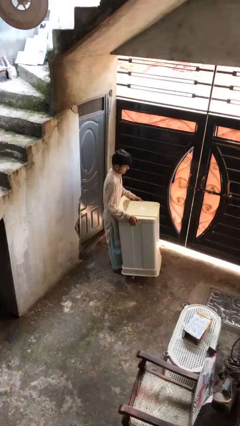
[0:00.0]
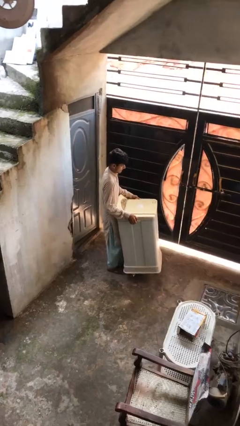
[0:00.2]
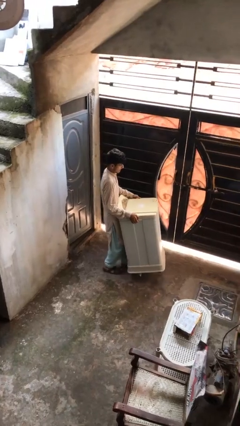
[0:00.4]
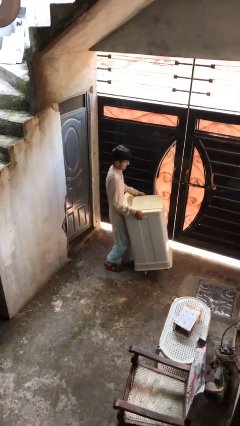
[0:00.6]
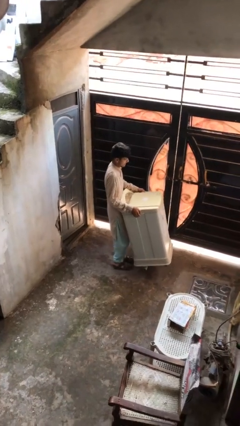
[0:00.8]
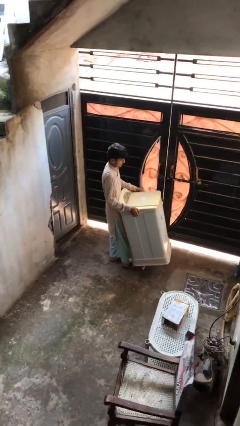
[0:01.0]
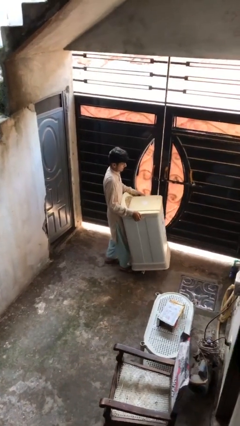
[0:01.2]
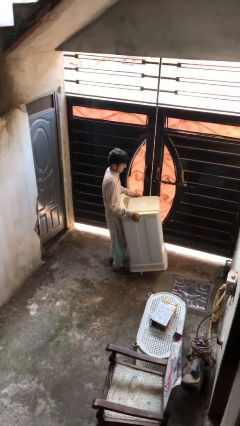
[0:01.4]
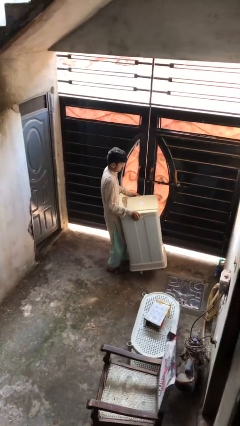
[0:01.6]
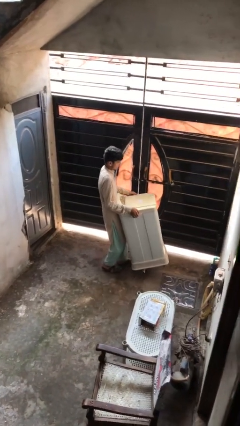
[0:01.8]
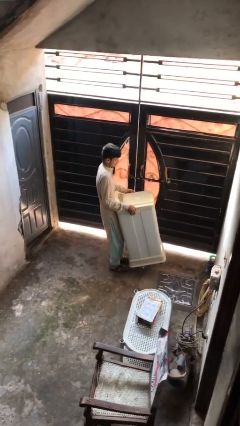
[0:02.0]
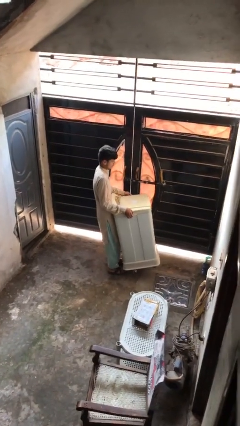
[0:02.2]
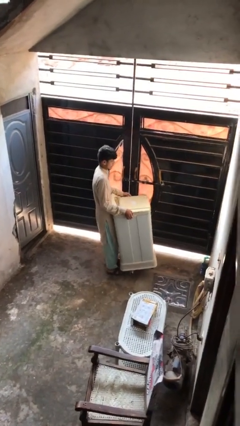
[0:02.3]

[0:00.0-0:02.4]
person carries heavy object

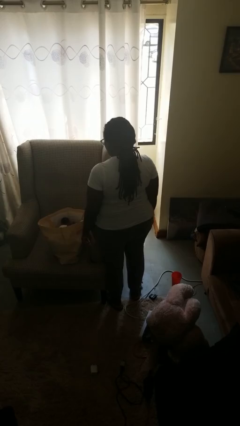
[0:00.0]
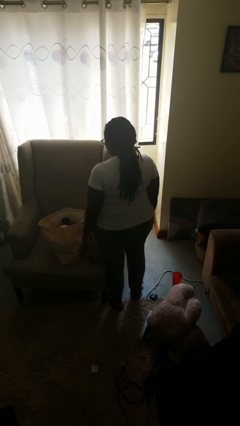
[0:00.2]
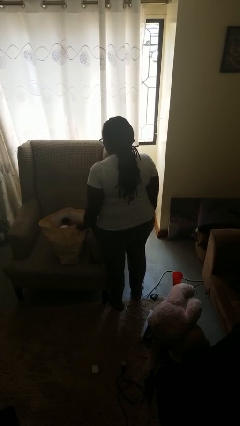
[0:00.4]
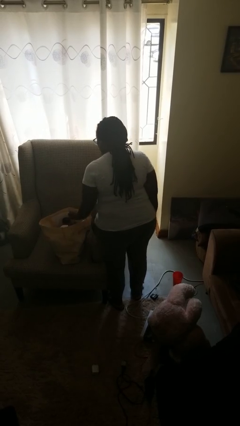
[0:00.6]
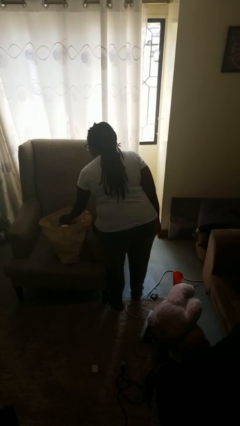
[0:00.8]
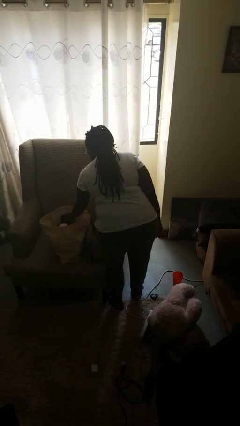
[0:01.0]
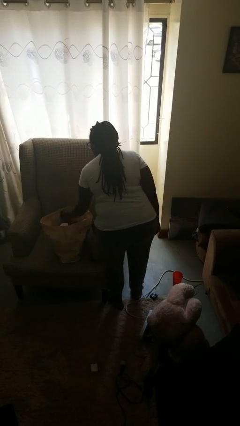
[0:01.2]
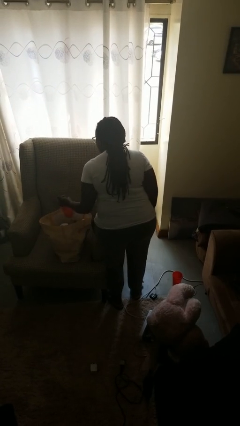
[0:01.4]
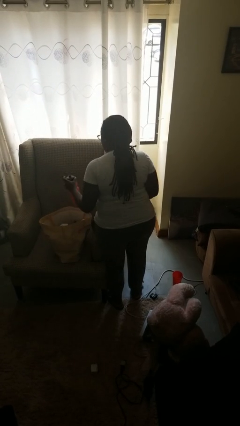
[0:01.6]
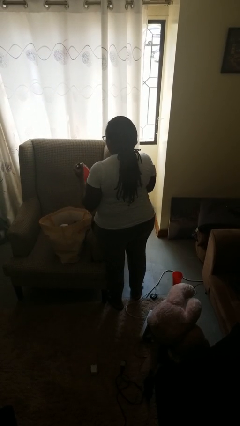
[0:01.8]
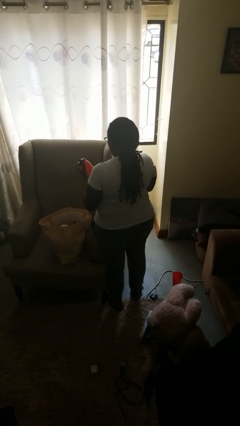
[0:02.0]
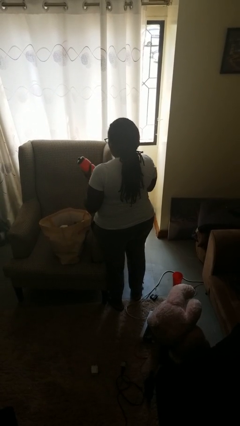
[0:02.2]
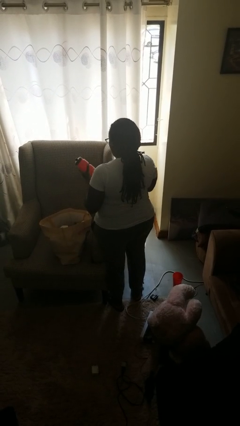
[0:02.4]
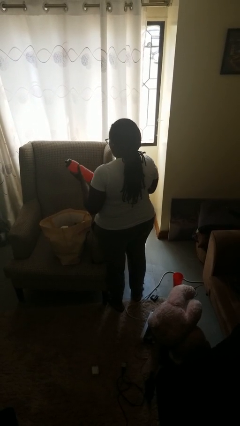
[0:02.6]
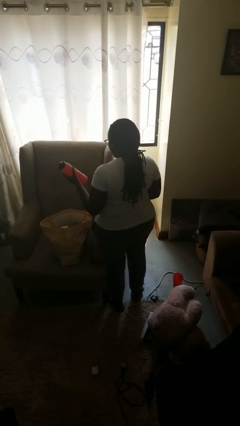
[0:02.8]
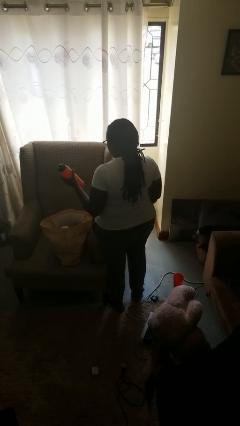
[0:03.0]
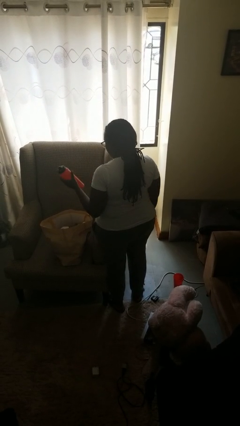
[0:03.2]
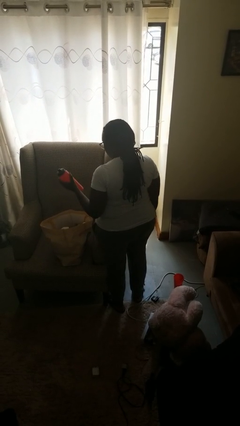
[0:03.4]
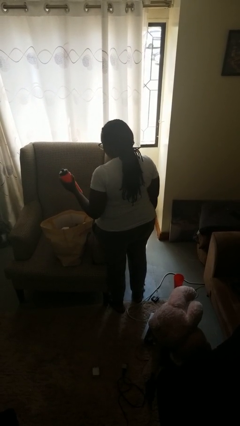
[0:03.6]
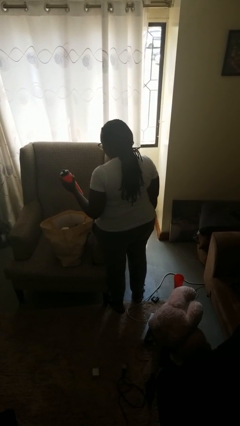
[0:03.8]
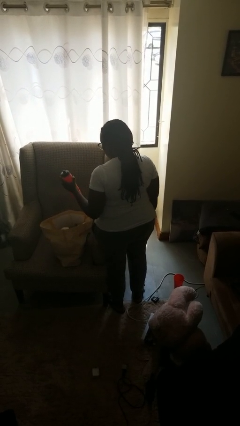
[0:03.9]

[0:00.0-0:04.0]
person takes object from bag

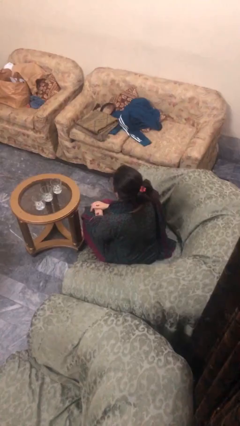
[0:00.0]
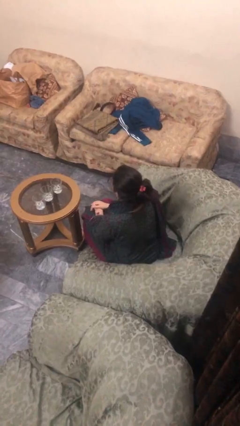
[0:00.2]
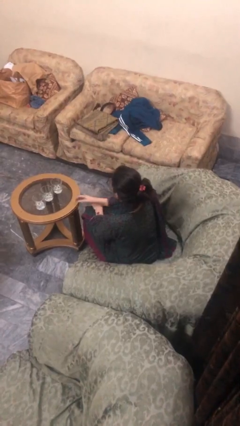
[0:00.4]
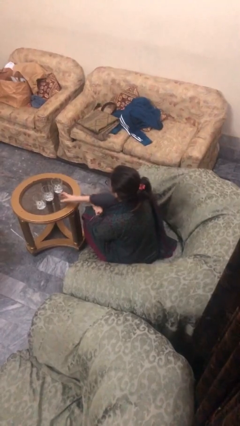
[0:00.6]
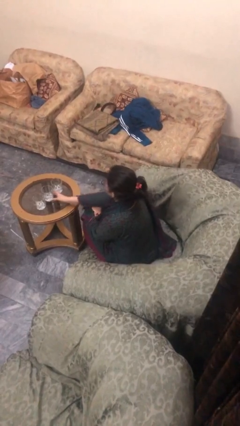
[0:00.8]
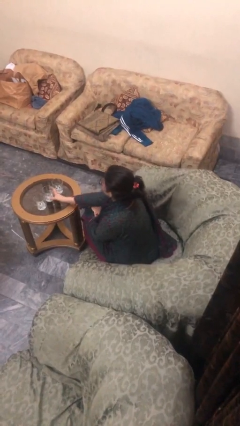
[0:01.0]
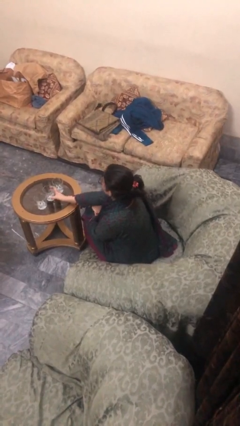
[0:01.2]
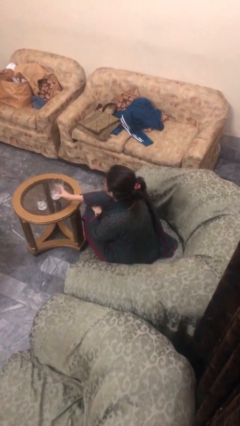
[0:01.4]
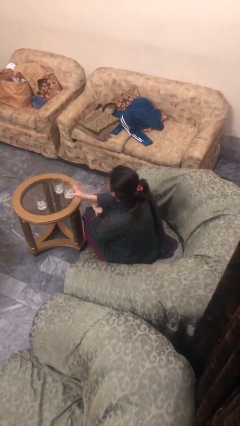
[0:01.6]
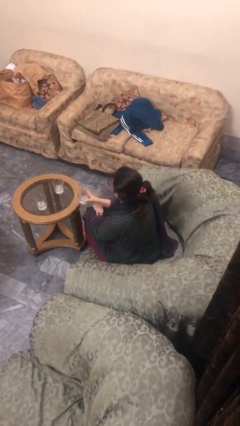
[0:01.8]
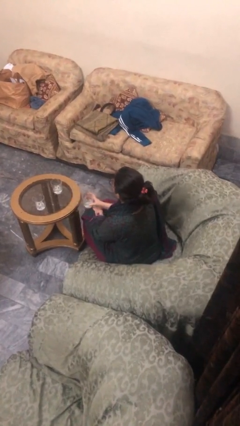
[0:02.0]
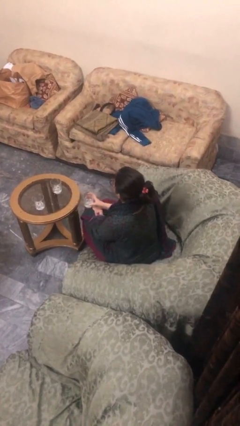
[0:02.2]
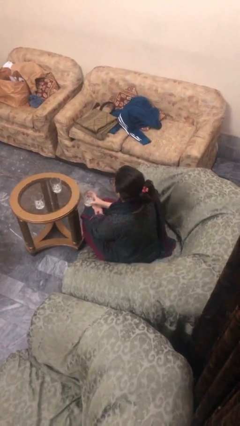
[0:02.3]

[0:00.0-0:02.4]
person picks up object from table

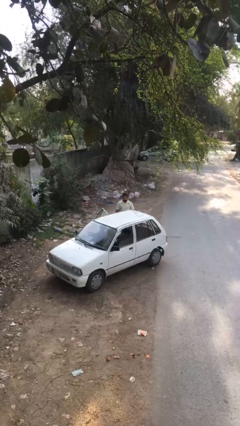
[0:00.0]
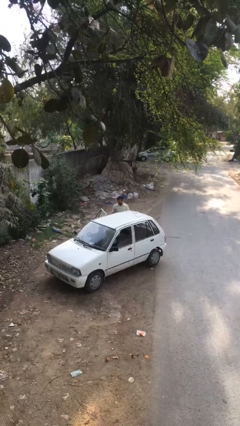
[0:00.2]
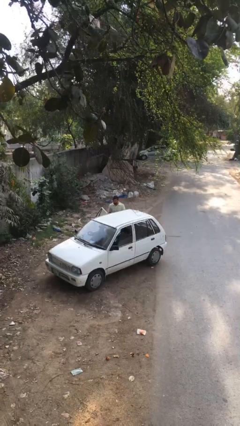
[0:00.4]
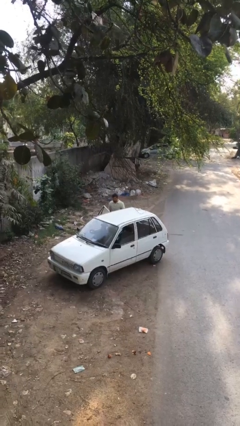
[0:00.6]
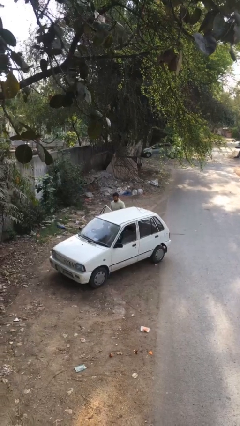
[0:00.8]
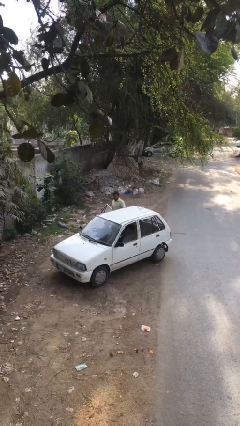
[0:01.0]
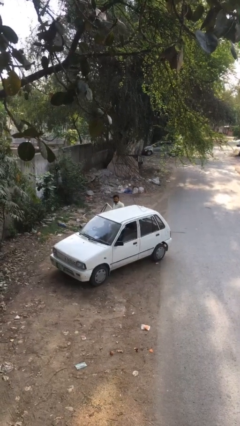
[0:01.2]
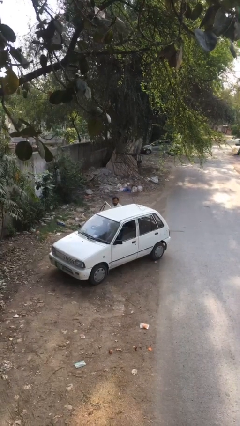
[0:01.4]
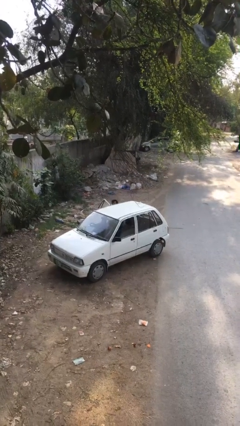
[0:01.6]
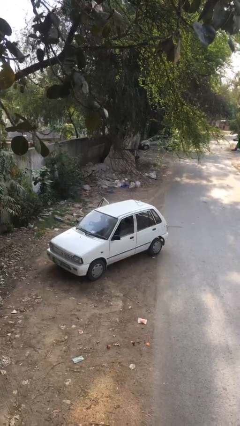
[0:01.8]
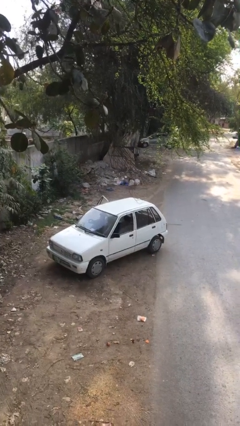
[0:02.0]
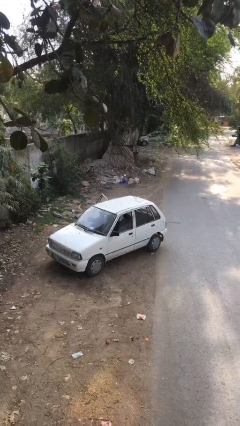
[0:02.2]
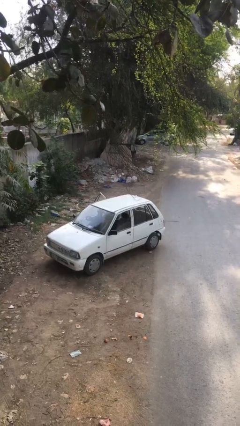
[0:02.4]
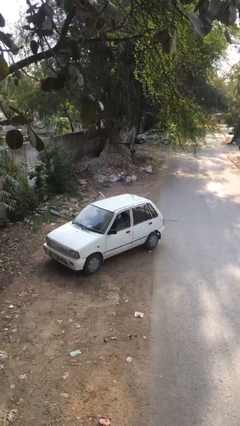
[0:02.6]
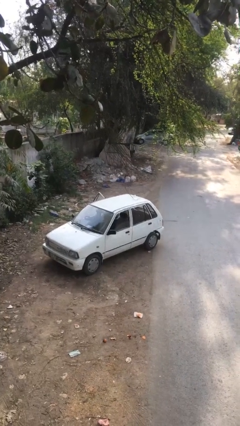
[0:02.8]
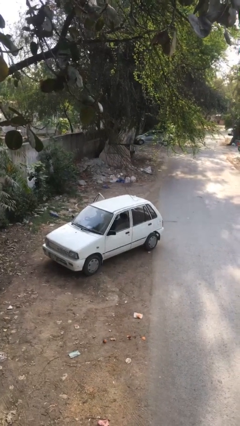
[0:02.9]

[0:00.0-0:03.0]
person enters car

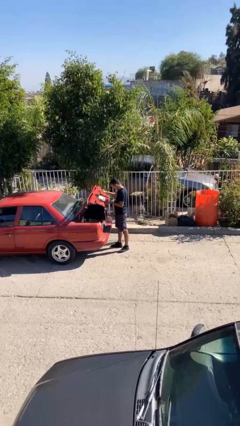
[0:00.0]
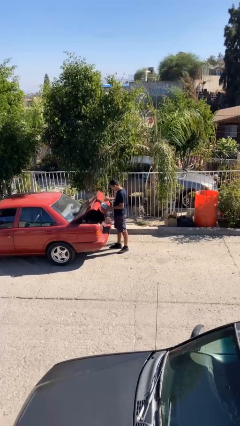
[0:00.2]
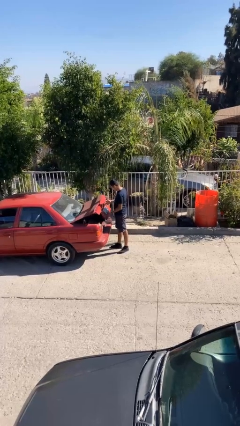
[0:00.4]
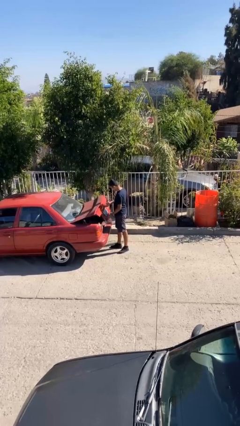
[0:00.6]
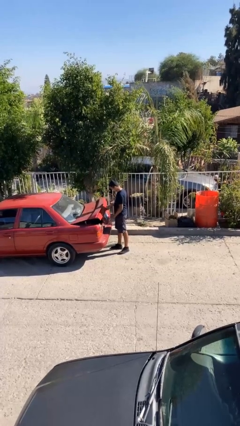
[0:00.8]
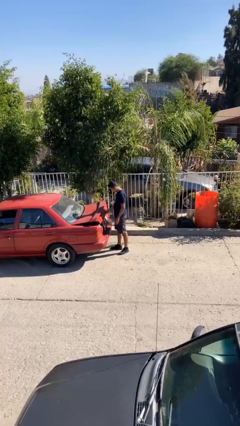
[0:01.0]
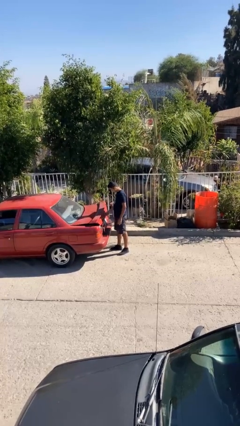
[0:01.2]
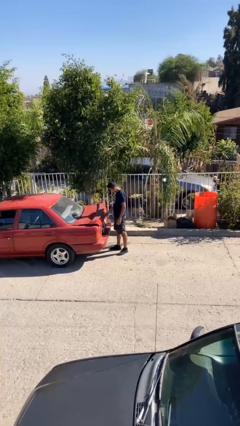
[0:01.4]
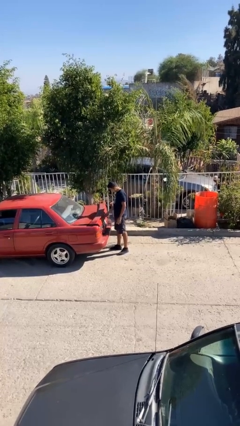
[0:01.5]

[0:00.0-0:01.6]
person closes car trunk

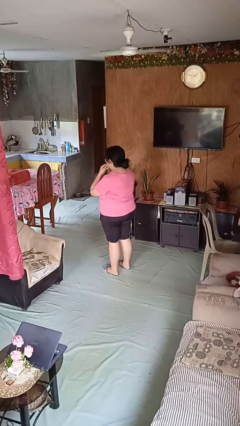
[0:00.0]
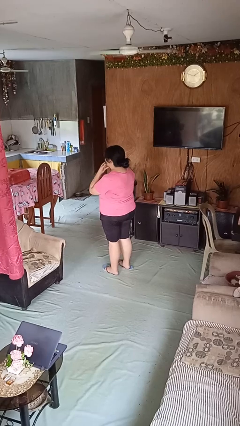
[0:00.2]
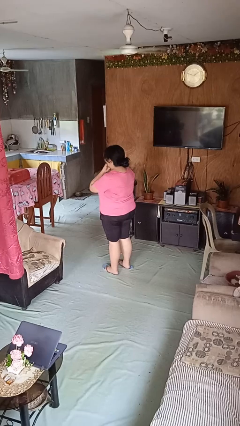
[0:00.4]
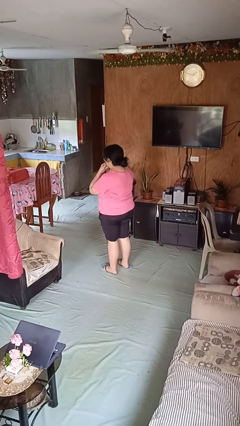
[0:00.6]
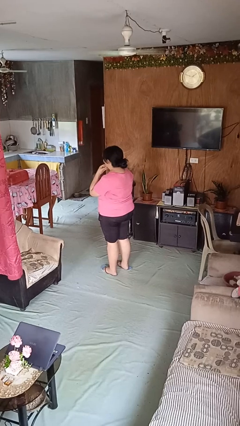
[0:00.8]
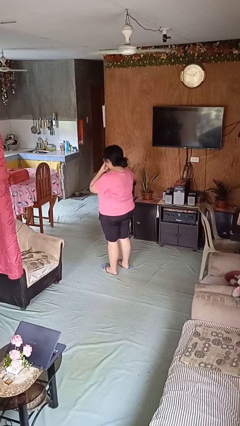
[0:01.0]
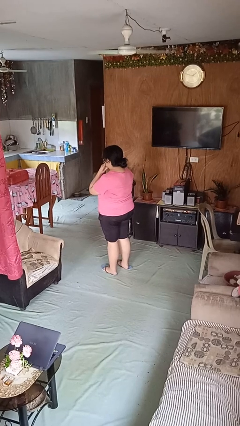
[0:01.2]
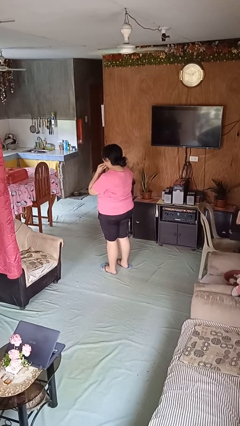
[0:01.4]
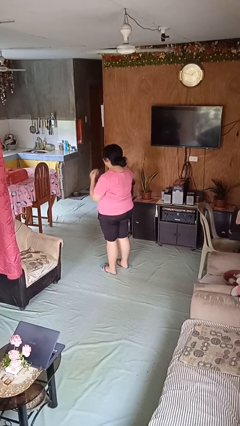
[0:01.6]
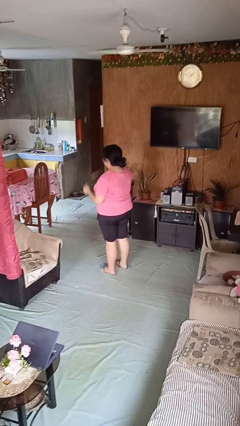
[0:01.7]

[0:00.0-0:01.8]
person strokes chin

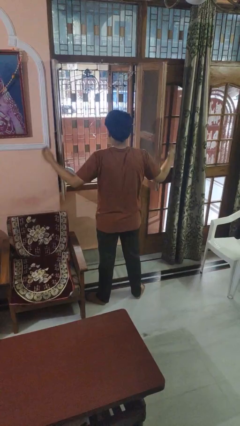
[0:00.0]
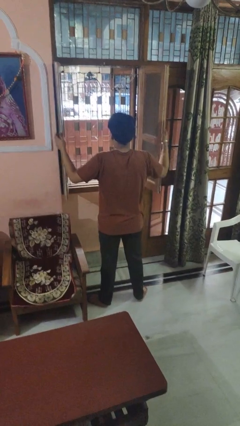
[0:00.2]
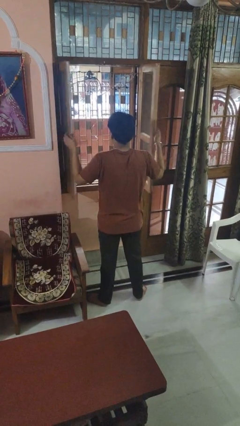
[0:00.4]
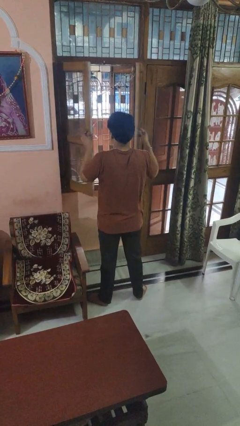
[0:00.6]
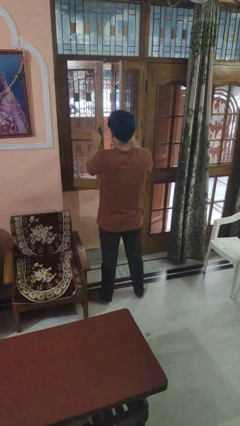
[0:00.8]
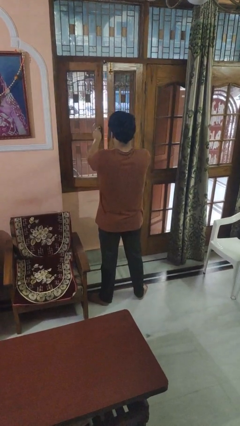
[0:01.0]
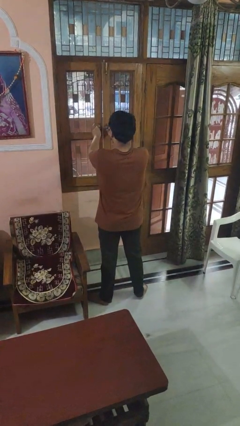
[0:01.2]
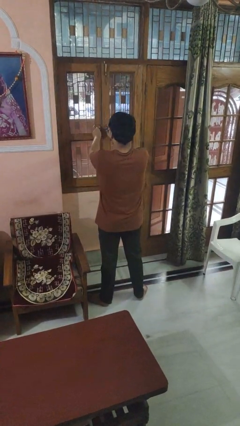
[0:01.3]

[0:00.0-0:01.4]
person closes home window

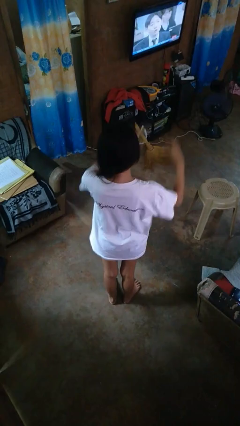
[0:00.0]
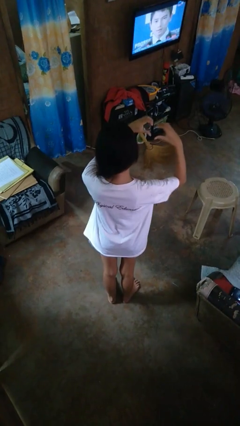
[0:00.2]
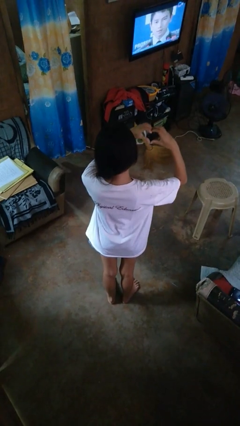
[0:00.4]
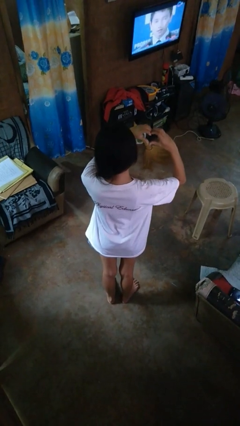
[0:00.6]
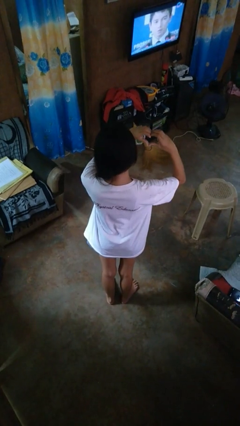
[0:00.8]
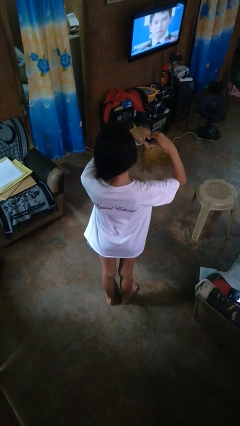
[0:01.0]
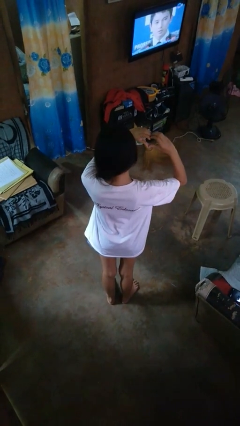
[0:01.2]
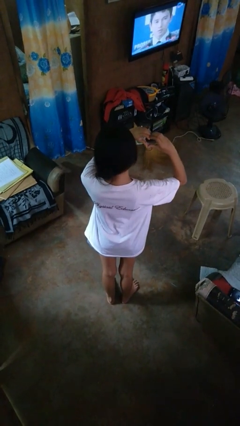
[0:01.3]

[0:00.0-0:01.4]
person gestures heart